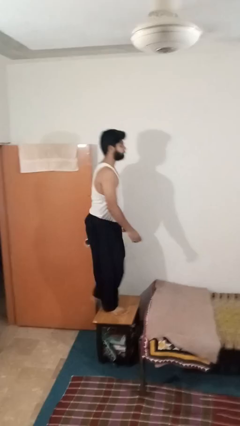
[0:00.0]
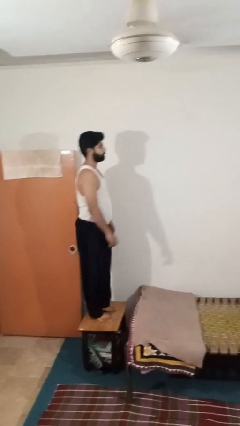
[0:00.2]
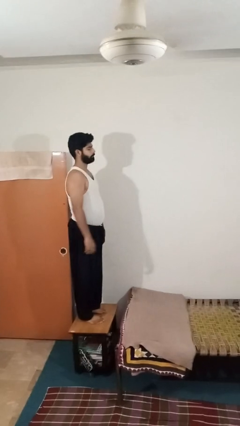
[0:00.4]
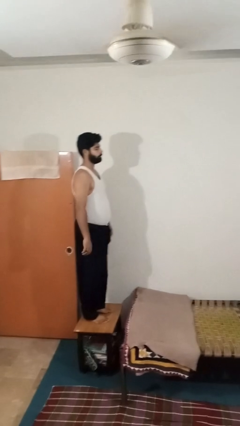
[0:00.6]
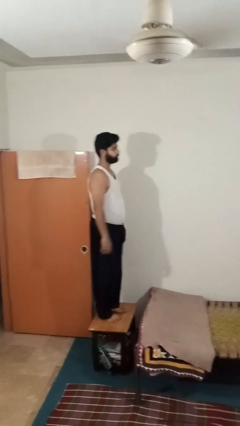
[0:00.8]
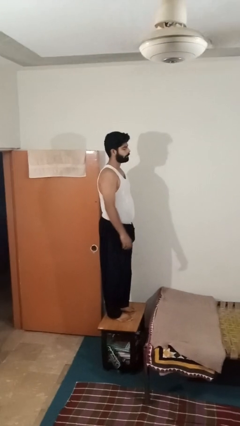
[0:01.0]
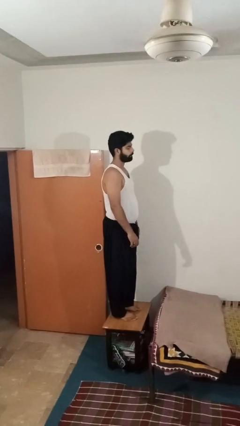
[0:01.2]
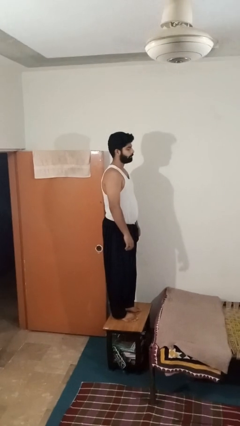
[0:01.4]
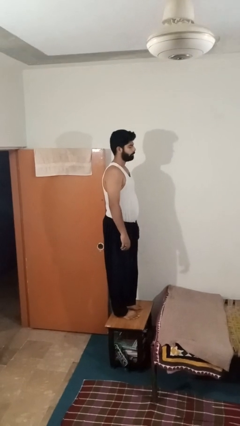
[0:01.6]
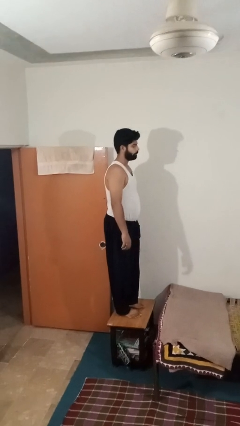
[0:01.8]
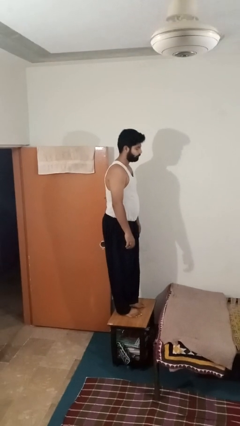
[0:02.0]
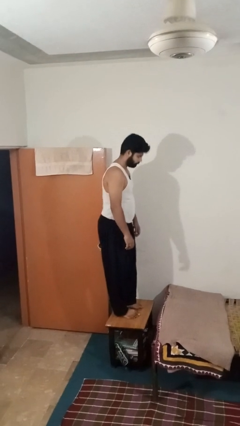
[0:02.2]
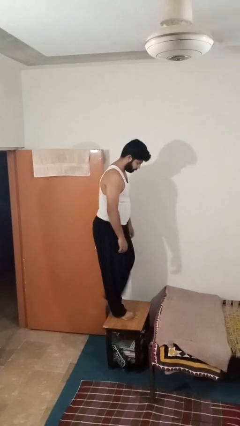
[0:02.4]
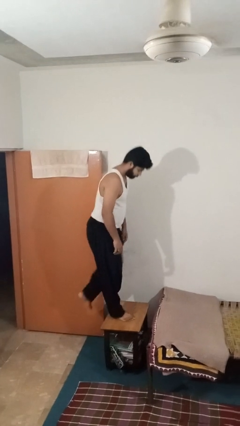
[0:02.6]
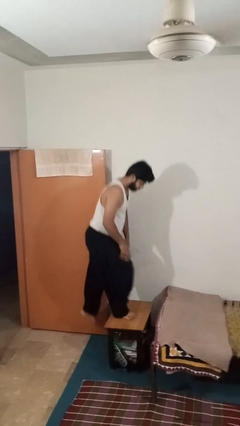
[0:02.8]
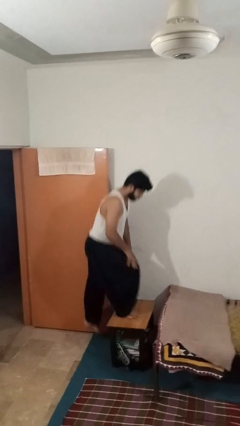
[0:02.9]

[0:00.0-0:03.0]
person climbs on table

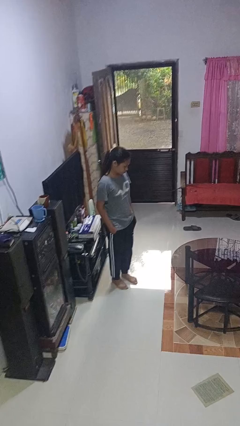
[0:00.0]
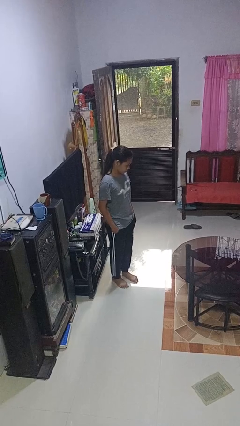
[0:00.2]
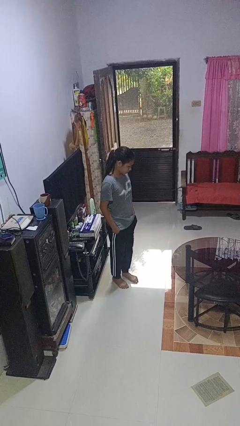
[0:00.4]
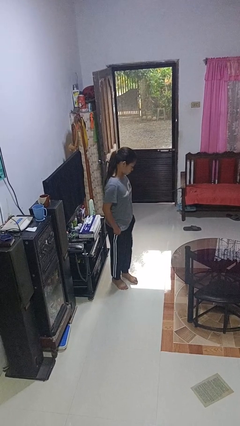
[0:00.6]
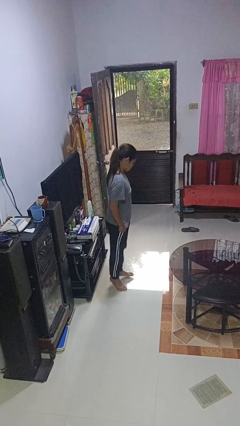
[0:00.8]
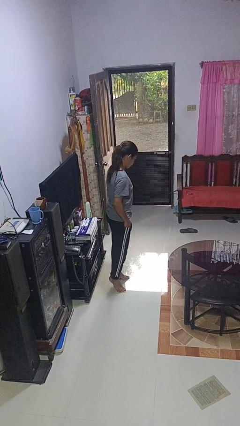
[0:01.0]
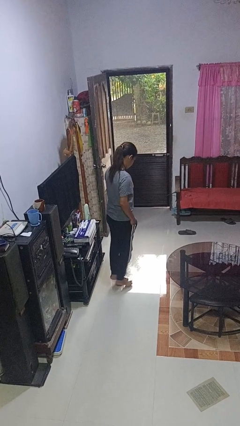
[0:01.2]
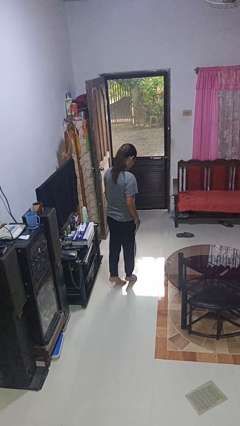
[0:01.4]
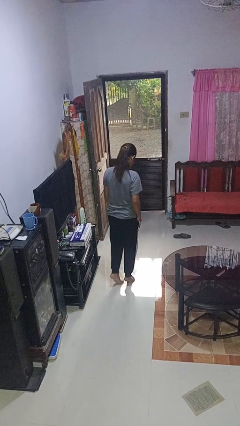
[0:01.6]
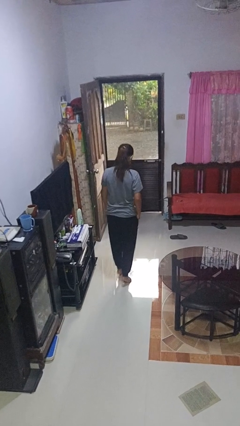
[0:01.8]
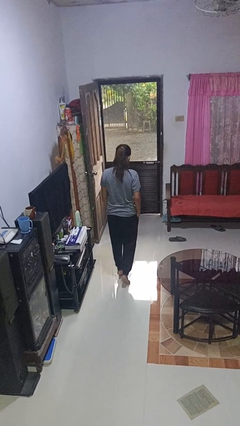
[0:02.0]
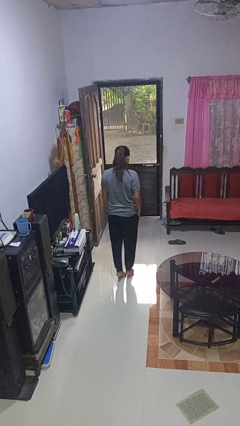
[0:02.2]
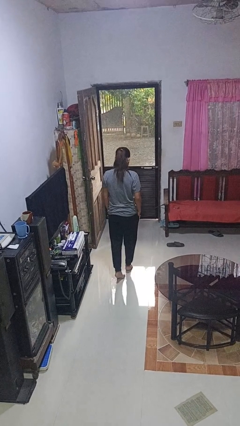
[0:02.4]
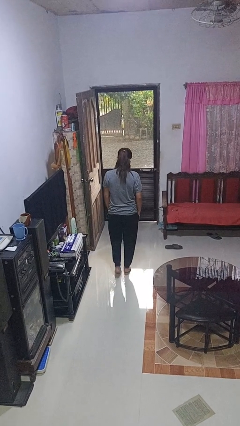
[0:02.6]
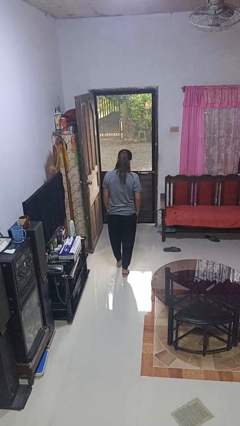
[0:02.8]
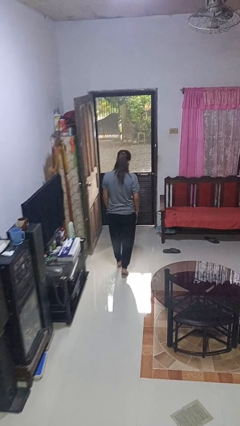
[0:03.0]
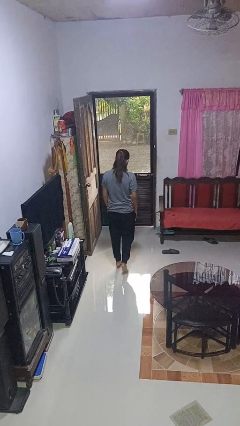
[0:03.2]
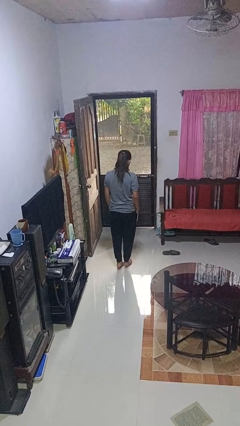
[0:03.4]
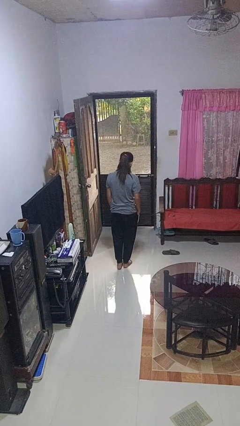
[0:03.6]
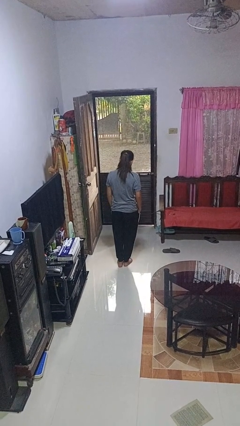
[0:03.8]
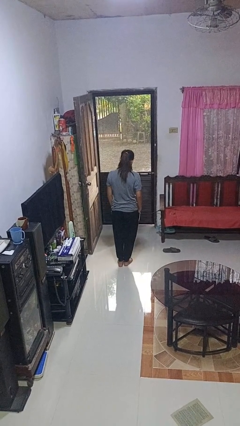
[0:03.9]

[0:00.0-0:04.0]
person walks tiptoe

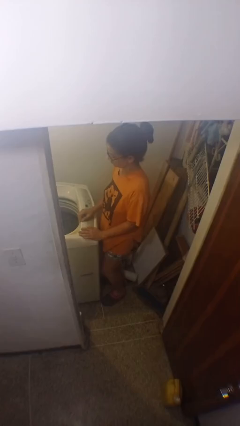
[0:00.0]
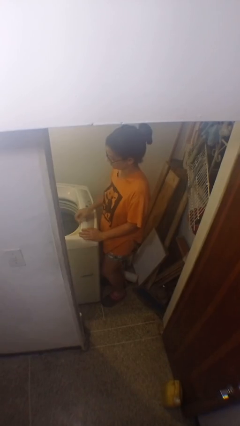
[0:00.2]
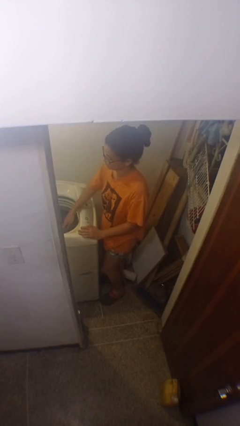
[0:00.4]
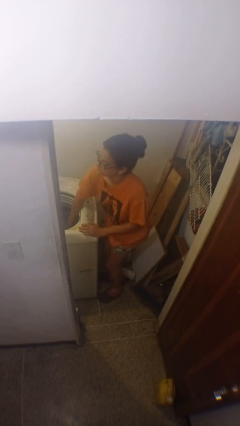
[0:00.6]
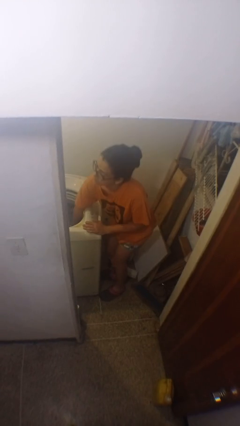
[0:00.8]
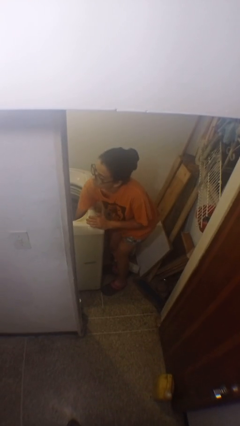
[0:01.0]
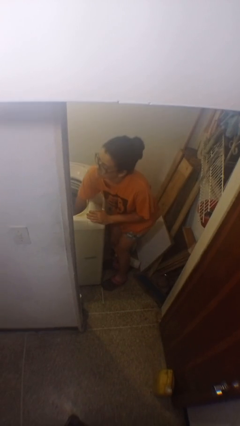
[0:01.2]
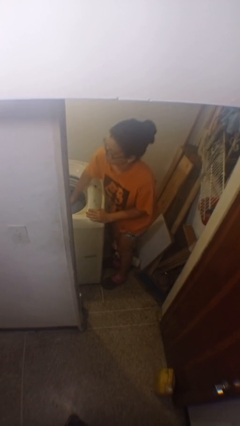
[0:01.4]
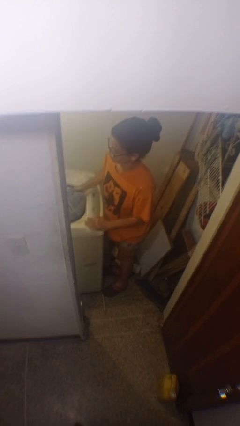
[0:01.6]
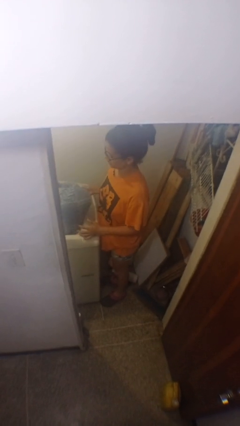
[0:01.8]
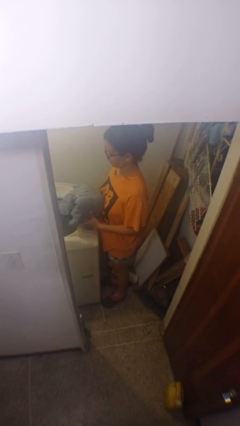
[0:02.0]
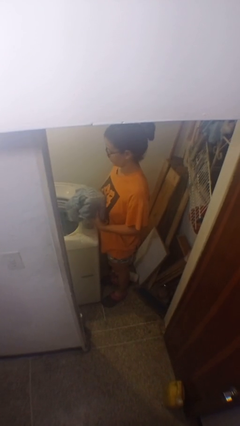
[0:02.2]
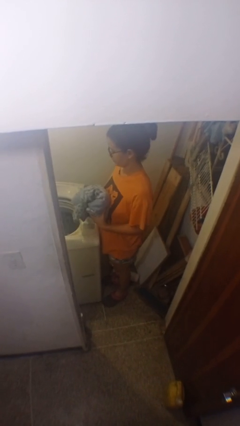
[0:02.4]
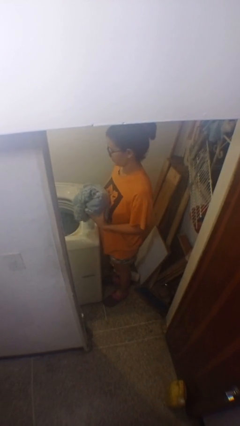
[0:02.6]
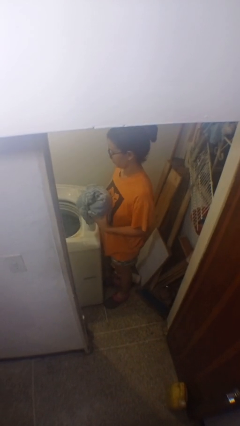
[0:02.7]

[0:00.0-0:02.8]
person unloads clotheswasher

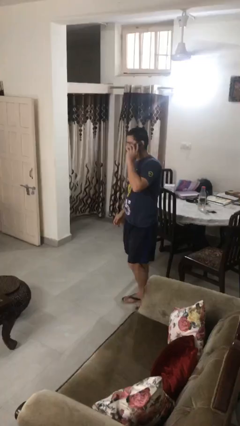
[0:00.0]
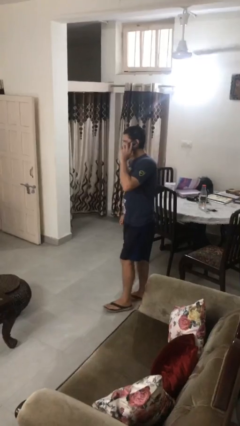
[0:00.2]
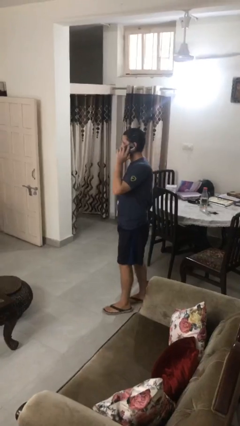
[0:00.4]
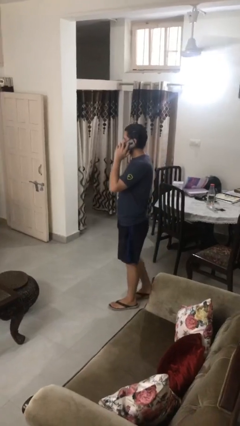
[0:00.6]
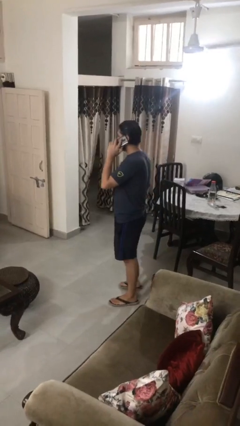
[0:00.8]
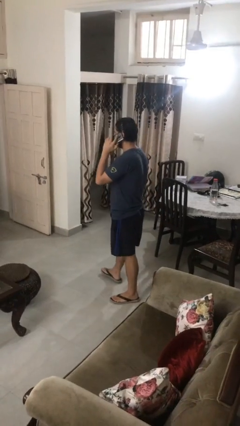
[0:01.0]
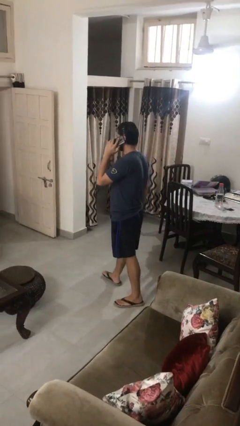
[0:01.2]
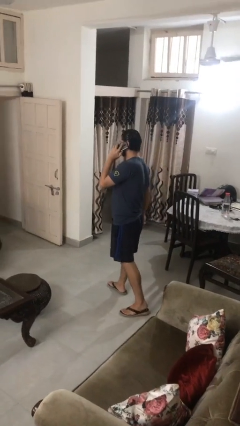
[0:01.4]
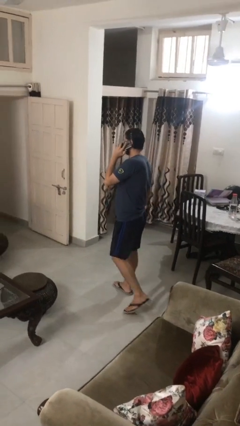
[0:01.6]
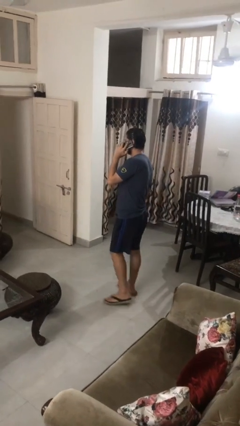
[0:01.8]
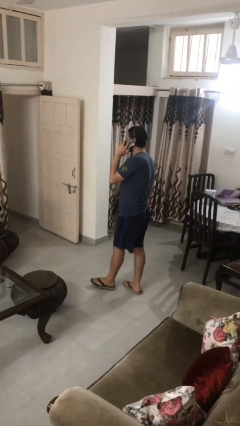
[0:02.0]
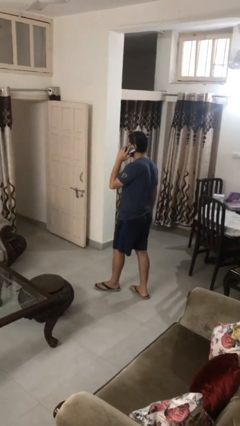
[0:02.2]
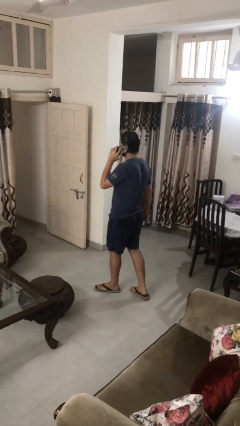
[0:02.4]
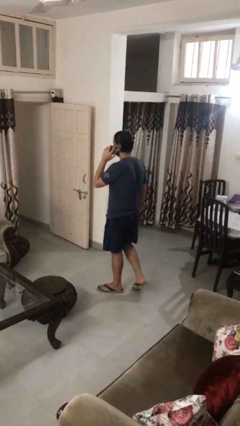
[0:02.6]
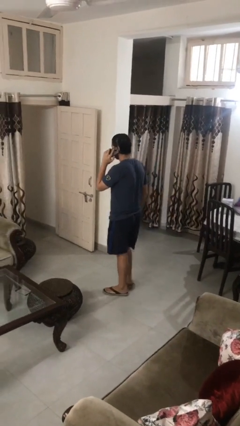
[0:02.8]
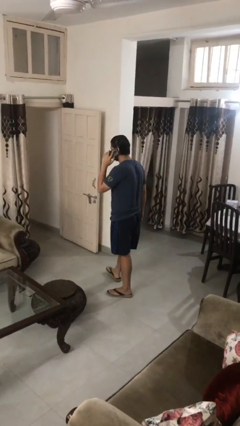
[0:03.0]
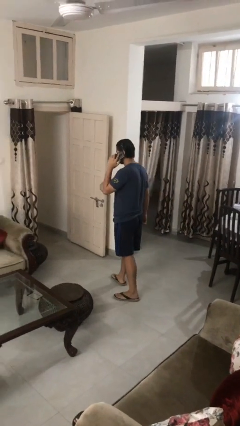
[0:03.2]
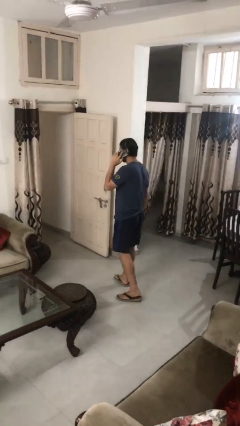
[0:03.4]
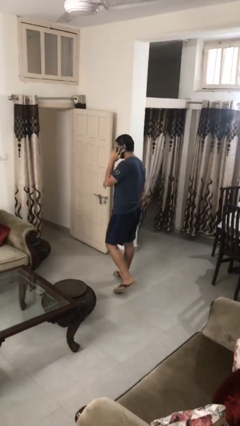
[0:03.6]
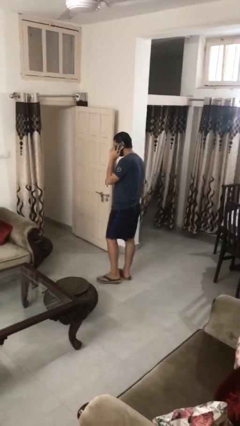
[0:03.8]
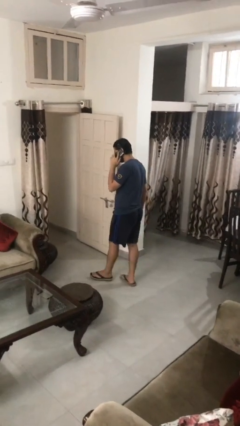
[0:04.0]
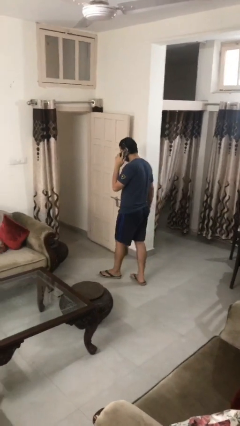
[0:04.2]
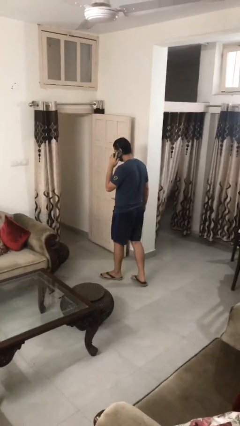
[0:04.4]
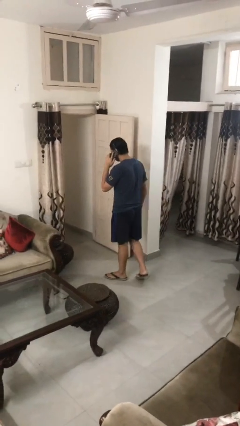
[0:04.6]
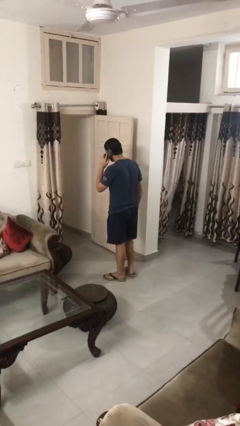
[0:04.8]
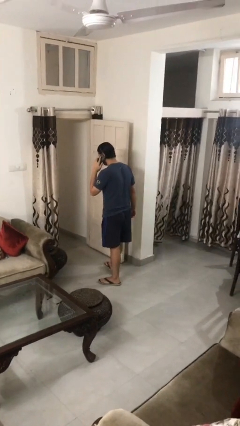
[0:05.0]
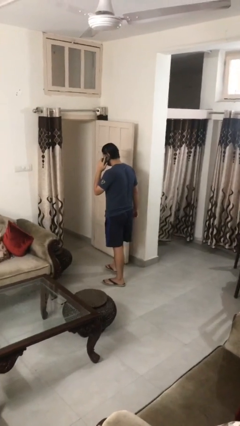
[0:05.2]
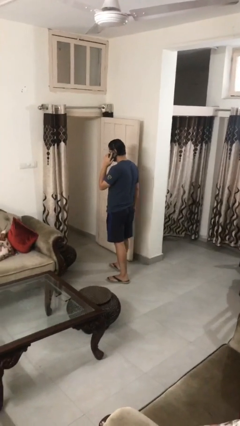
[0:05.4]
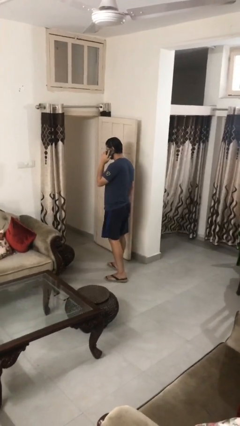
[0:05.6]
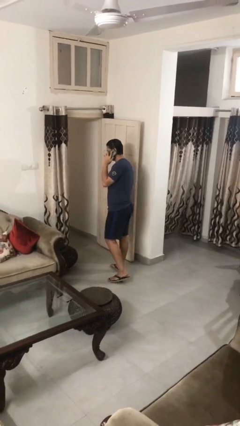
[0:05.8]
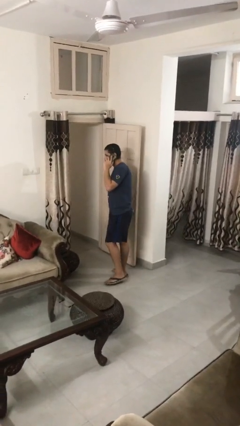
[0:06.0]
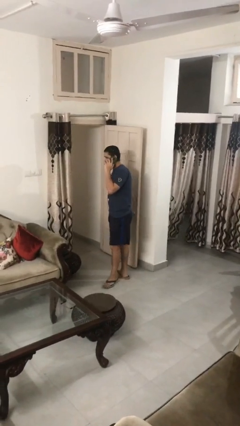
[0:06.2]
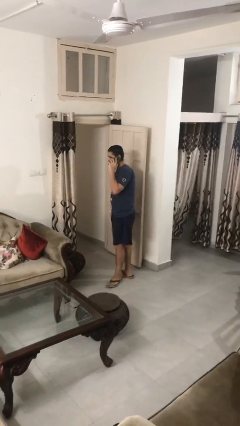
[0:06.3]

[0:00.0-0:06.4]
person talks on phone

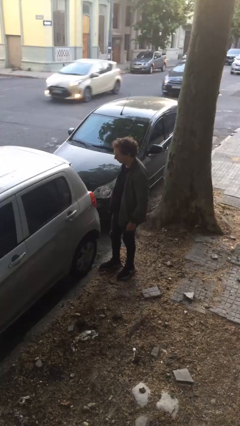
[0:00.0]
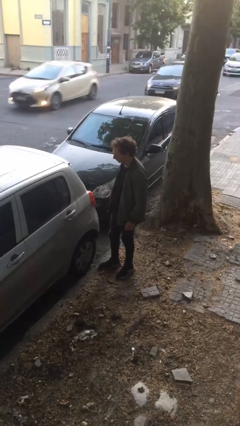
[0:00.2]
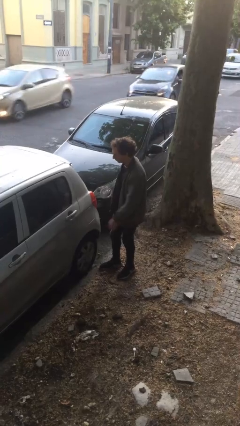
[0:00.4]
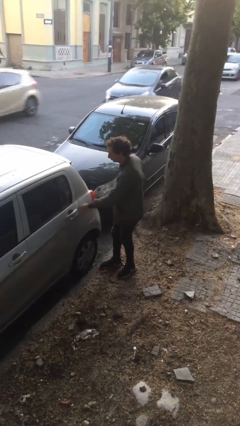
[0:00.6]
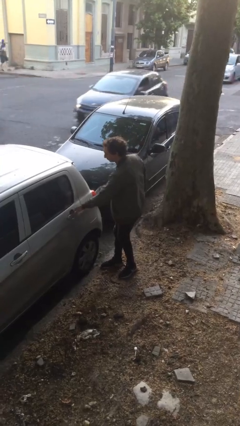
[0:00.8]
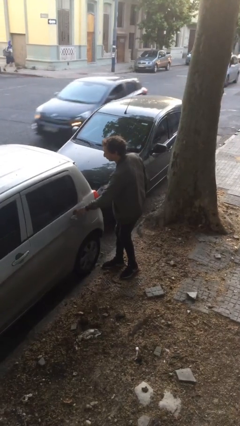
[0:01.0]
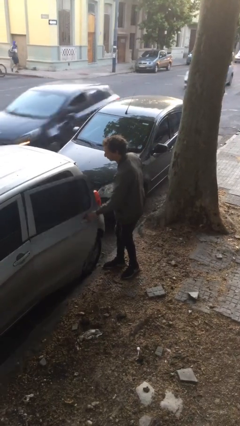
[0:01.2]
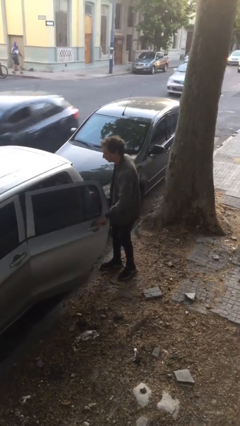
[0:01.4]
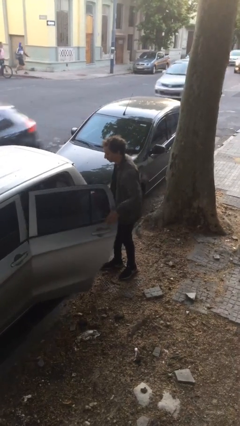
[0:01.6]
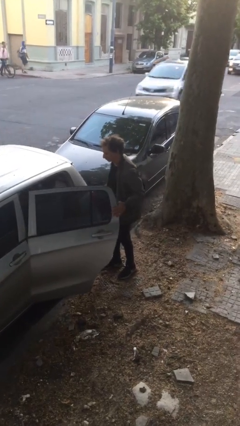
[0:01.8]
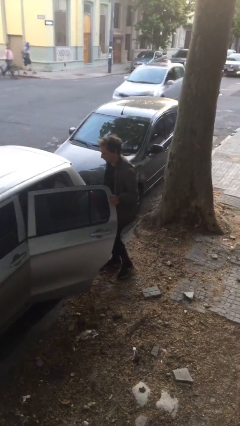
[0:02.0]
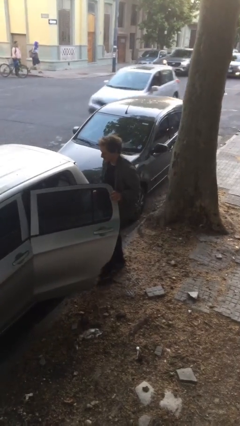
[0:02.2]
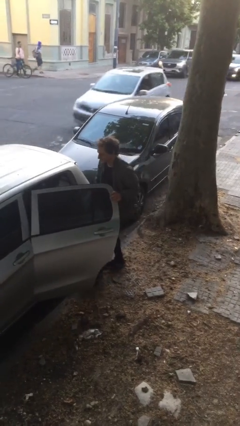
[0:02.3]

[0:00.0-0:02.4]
person opens car door
